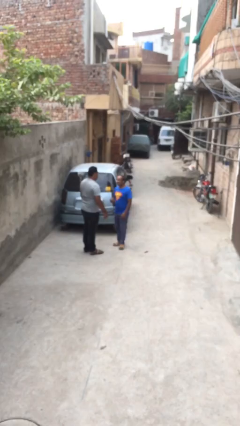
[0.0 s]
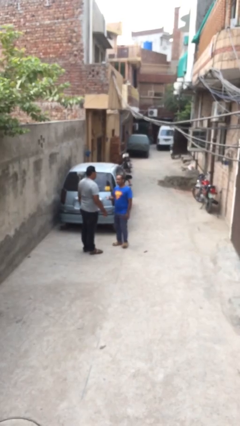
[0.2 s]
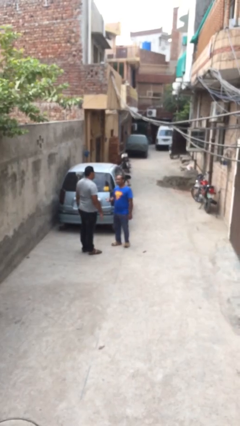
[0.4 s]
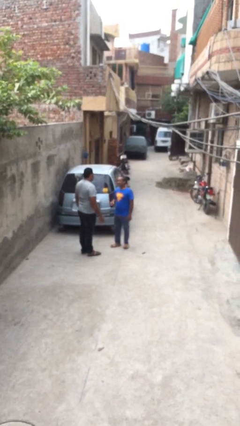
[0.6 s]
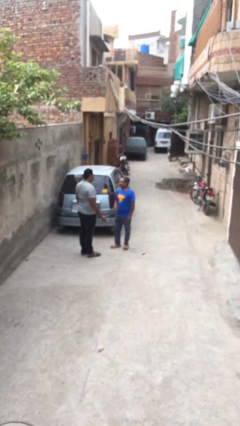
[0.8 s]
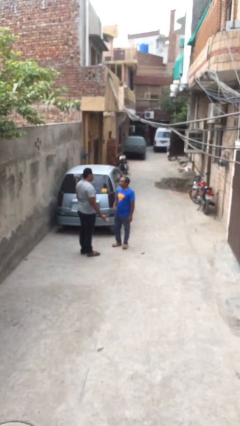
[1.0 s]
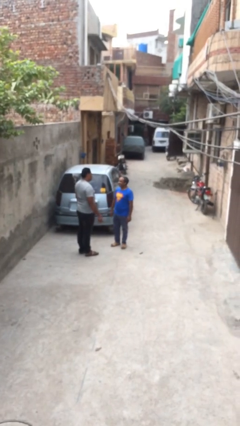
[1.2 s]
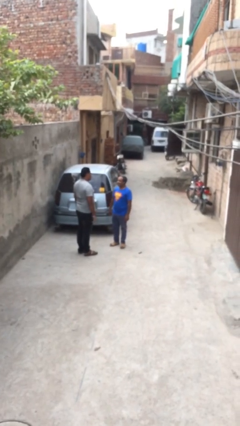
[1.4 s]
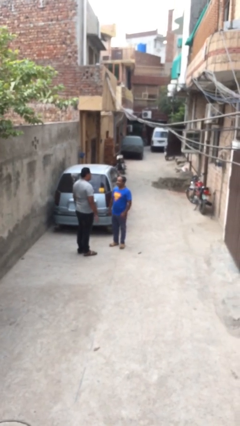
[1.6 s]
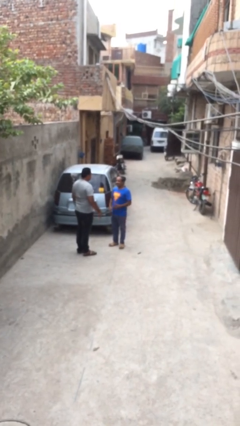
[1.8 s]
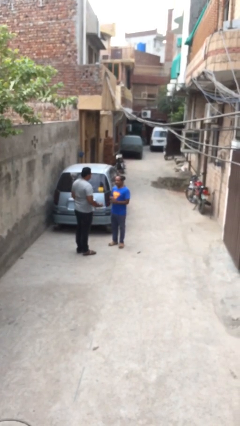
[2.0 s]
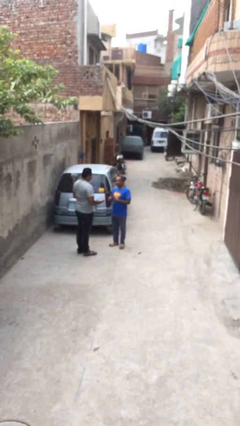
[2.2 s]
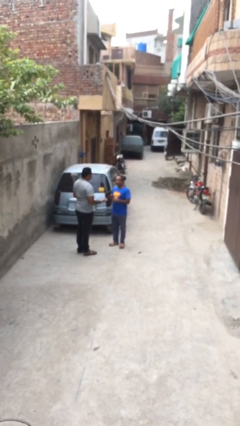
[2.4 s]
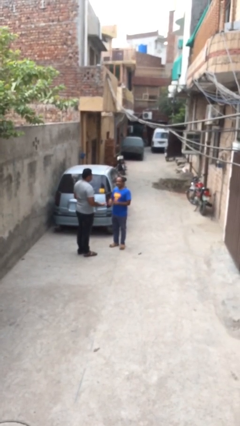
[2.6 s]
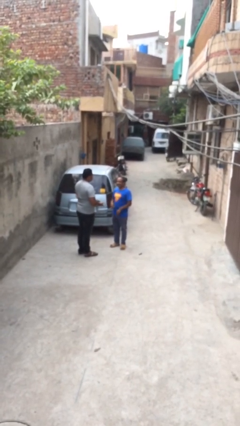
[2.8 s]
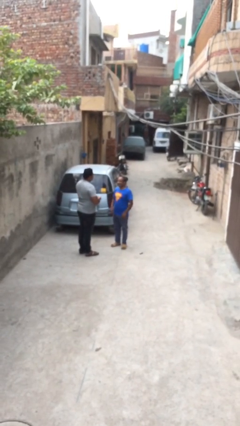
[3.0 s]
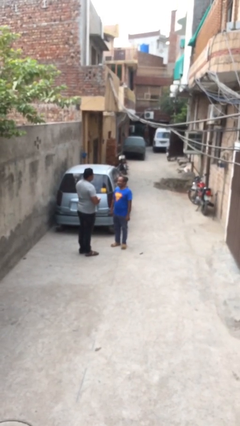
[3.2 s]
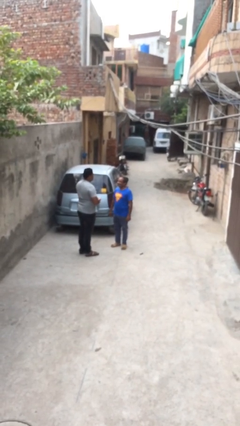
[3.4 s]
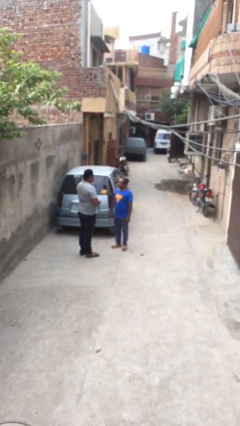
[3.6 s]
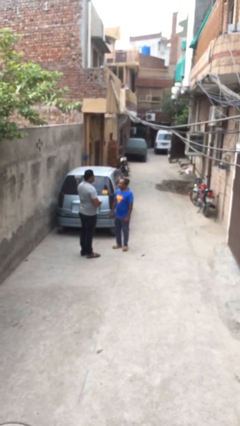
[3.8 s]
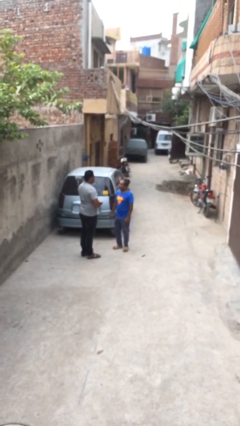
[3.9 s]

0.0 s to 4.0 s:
person talks to person

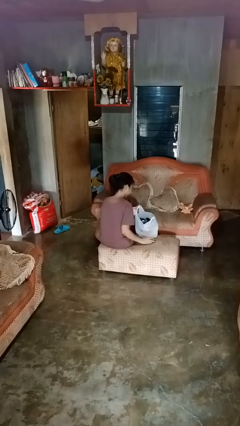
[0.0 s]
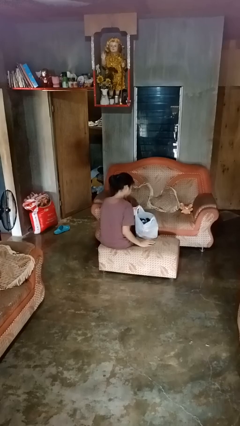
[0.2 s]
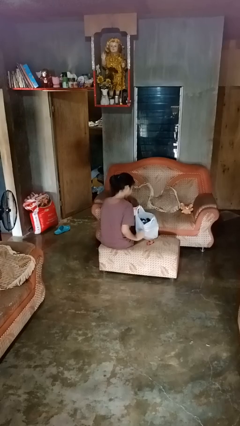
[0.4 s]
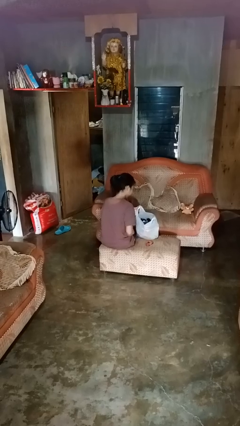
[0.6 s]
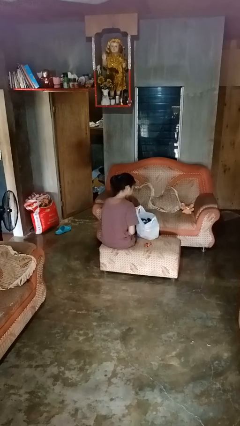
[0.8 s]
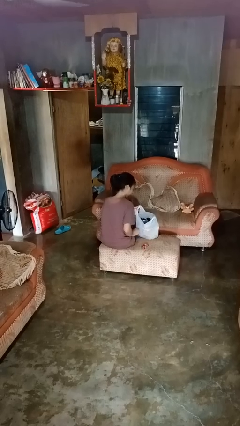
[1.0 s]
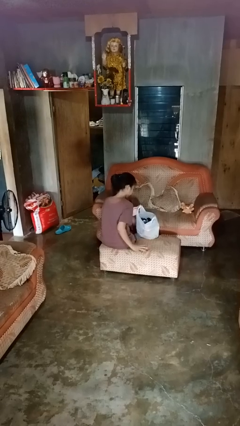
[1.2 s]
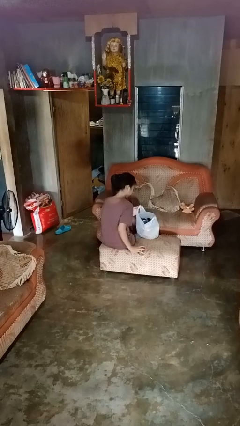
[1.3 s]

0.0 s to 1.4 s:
person takes object from bag

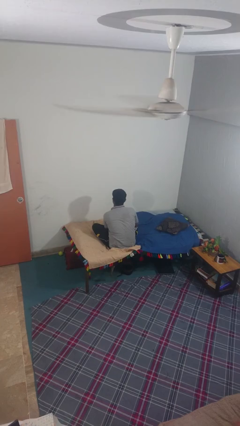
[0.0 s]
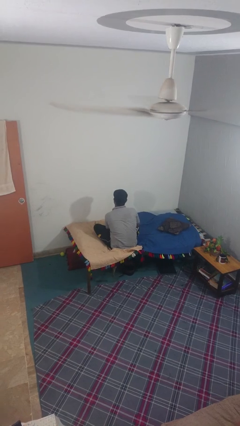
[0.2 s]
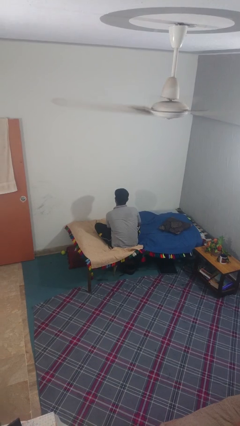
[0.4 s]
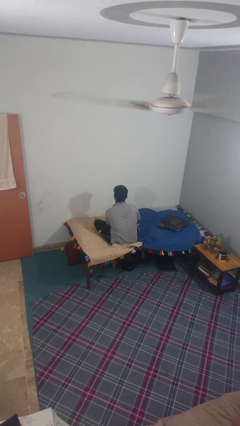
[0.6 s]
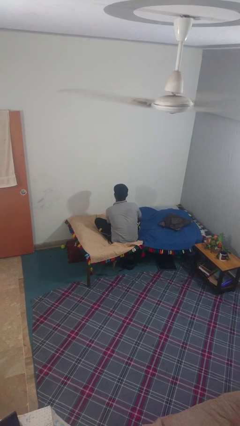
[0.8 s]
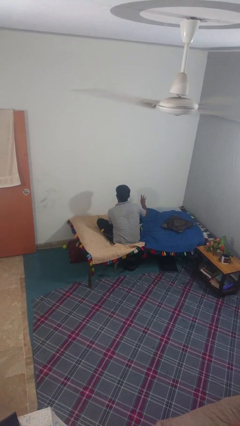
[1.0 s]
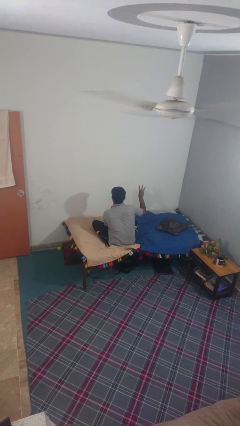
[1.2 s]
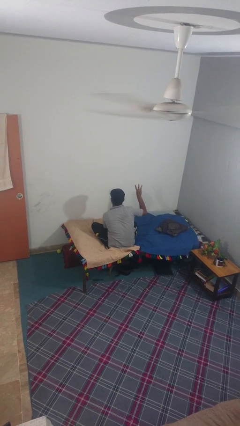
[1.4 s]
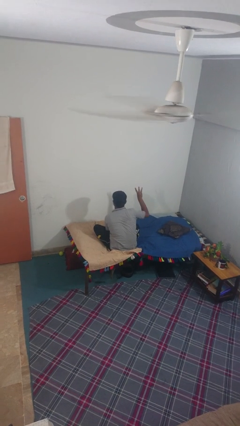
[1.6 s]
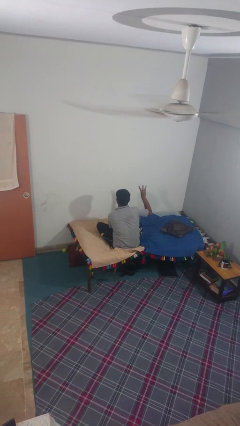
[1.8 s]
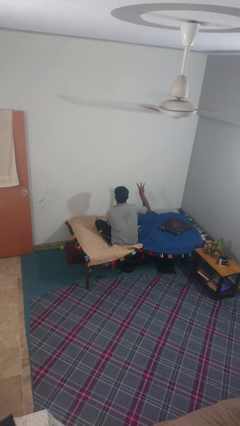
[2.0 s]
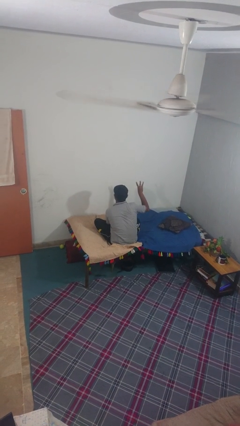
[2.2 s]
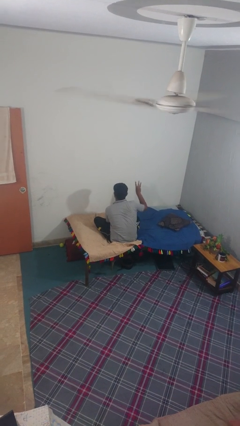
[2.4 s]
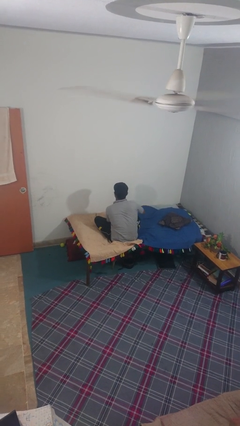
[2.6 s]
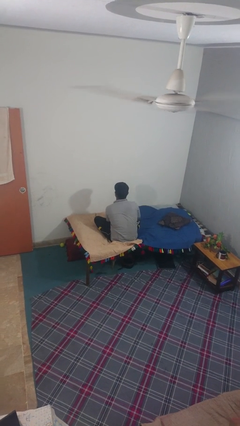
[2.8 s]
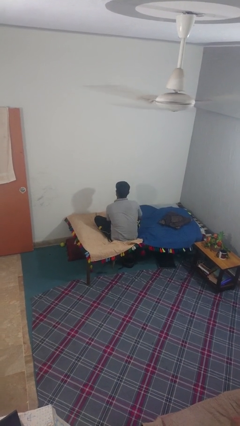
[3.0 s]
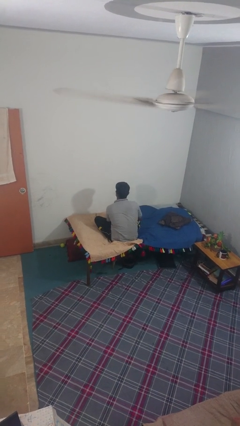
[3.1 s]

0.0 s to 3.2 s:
person gestures number three

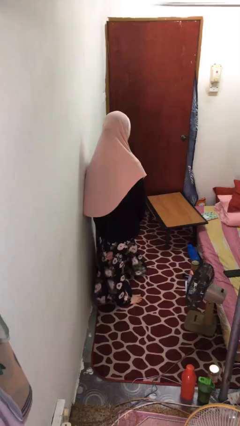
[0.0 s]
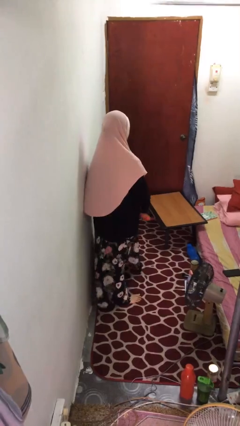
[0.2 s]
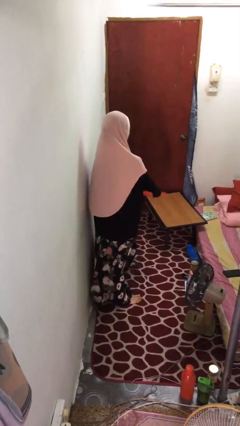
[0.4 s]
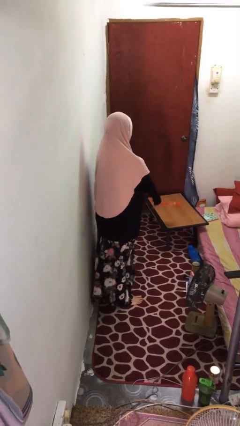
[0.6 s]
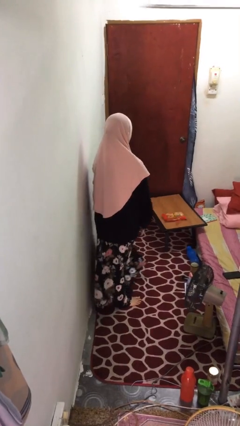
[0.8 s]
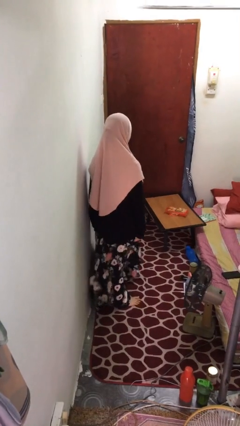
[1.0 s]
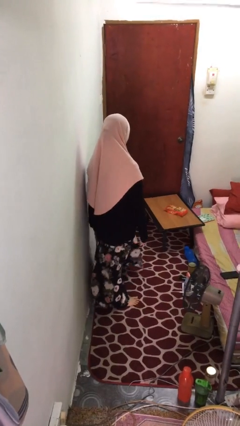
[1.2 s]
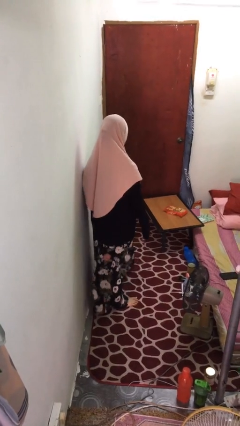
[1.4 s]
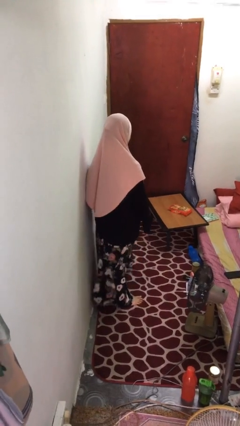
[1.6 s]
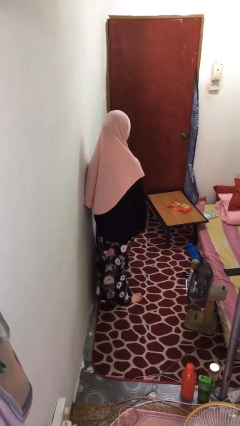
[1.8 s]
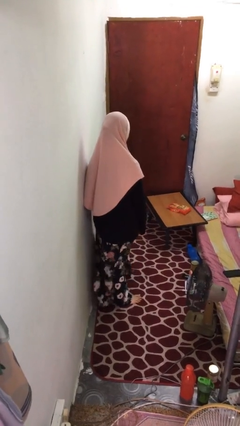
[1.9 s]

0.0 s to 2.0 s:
person throws object on table

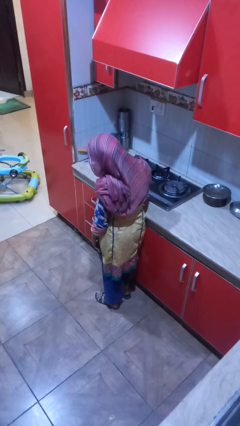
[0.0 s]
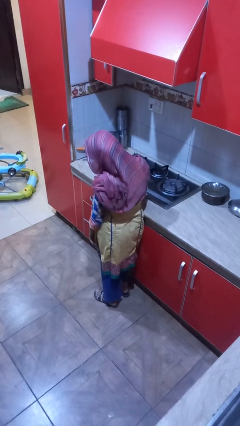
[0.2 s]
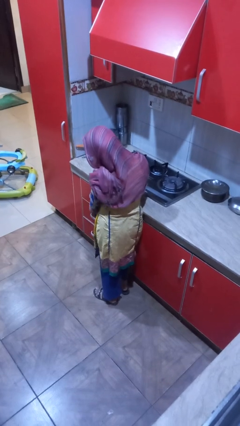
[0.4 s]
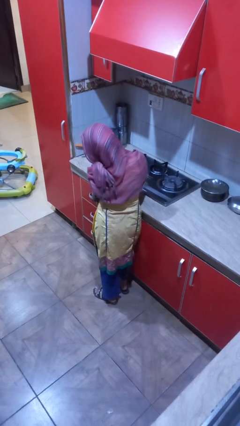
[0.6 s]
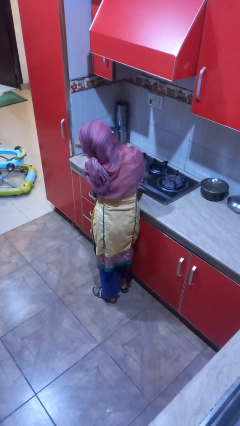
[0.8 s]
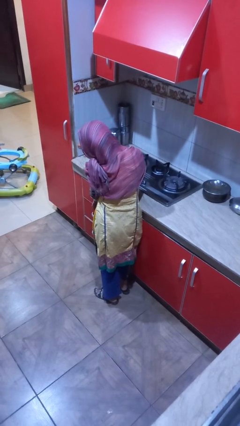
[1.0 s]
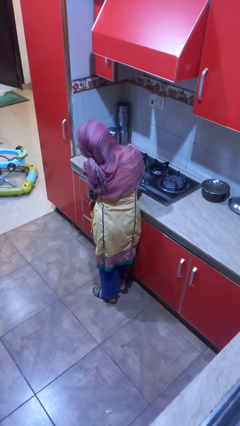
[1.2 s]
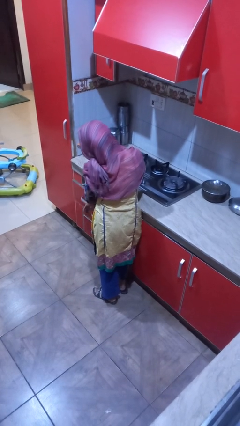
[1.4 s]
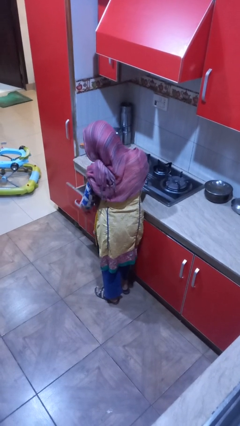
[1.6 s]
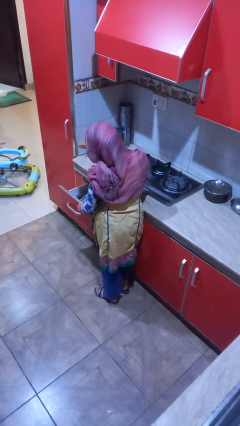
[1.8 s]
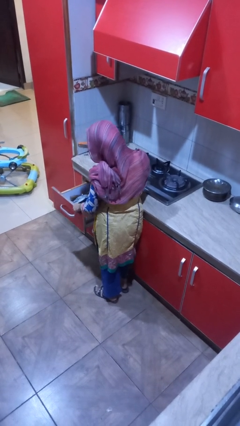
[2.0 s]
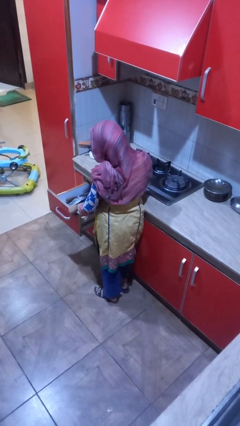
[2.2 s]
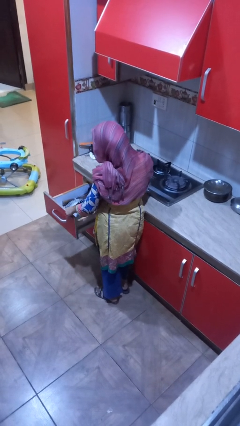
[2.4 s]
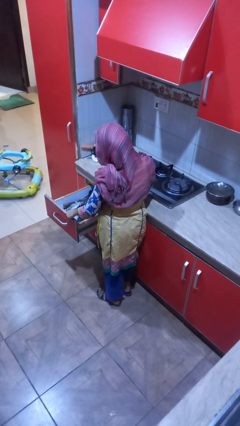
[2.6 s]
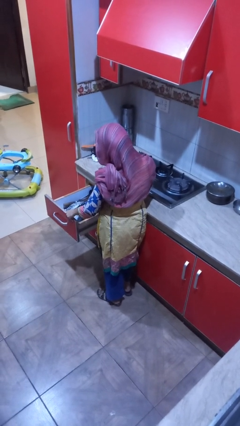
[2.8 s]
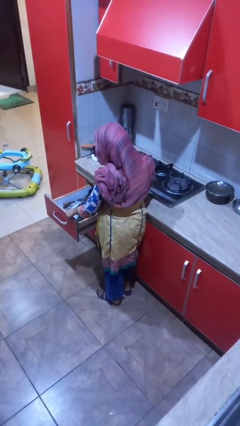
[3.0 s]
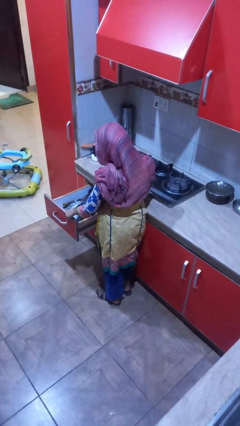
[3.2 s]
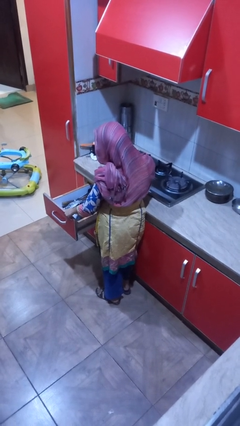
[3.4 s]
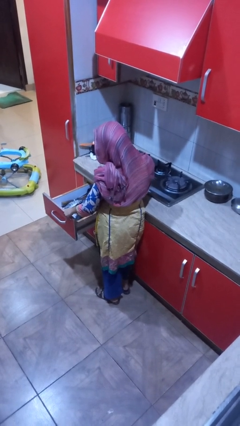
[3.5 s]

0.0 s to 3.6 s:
person opens kitchen drawer

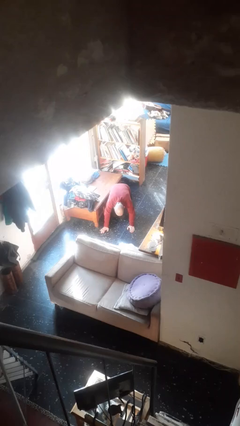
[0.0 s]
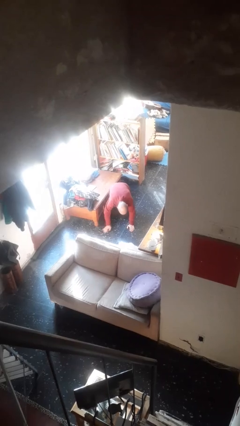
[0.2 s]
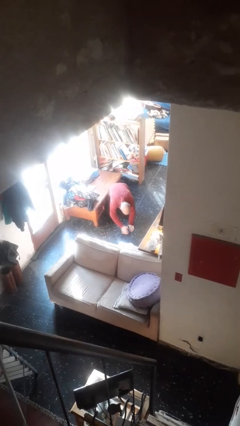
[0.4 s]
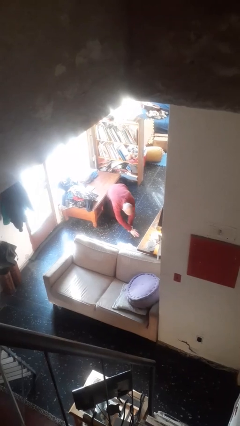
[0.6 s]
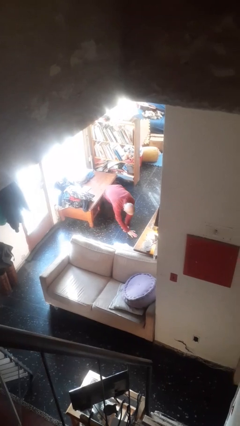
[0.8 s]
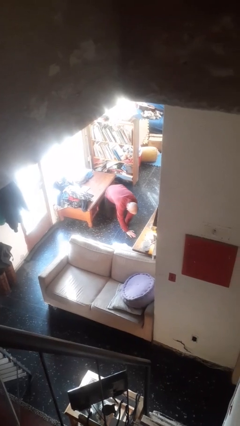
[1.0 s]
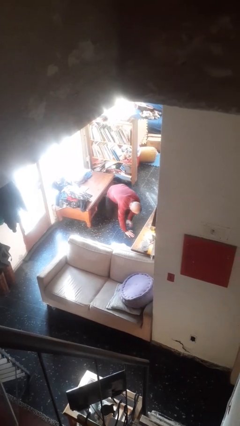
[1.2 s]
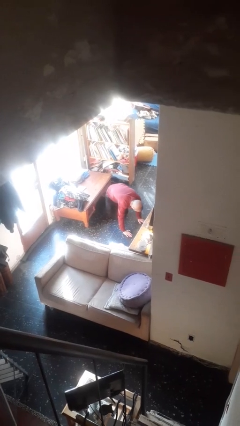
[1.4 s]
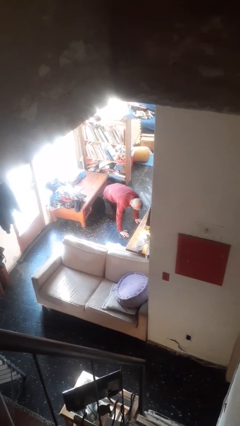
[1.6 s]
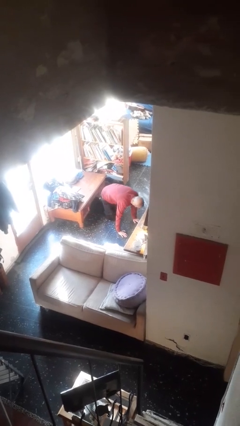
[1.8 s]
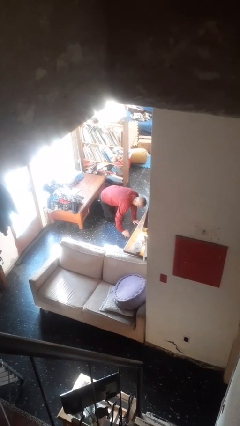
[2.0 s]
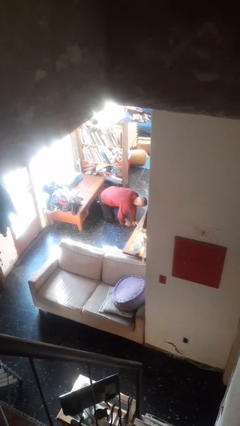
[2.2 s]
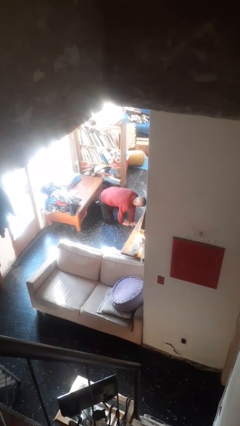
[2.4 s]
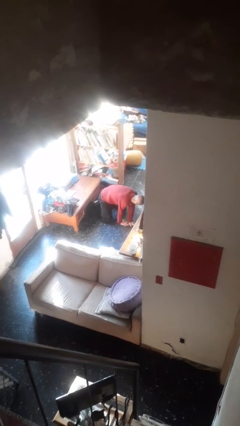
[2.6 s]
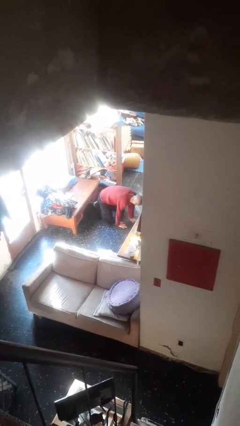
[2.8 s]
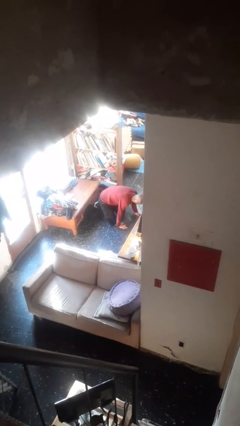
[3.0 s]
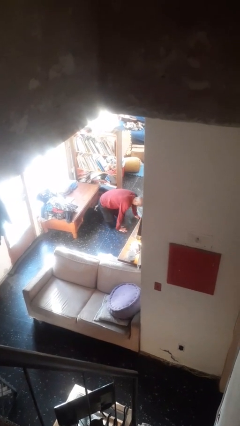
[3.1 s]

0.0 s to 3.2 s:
person crawls
